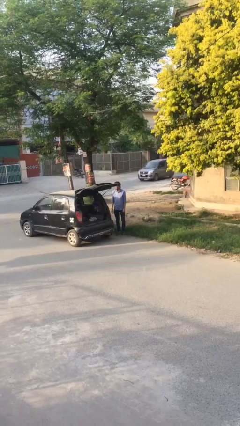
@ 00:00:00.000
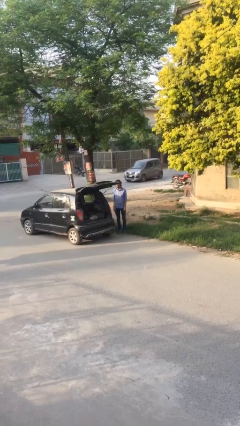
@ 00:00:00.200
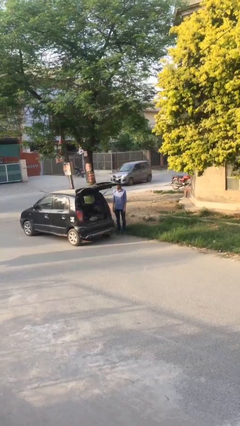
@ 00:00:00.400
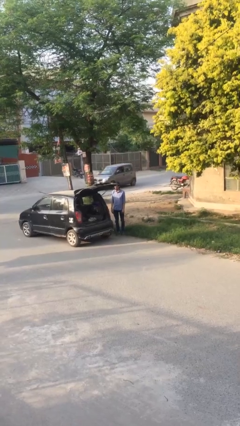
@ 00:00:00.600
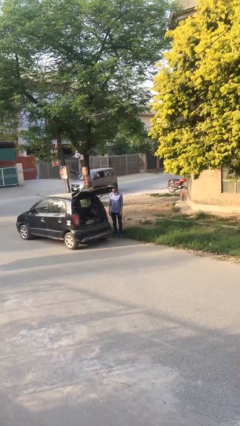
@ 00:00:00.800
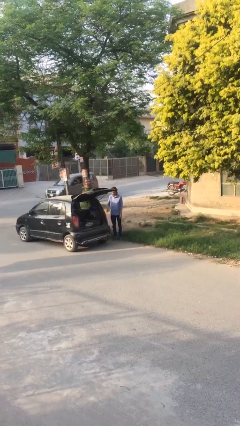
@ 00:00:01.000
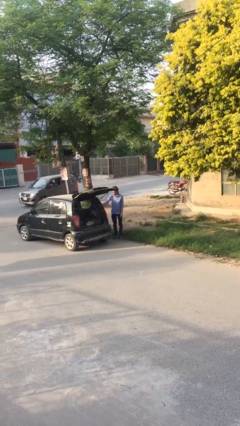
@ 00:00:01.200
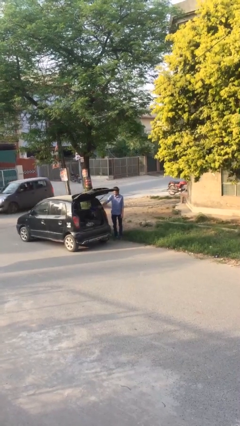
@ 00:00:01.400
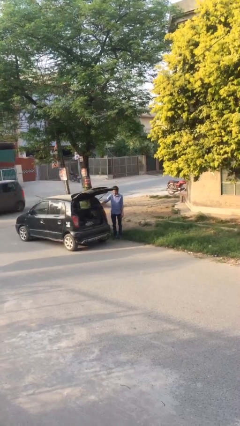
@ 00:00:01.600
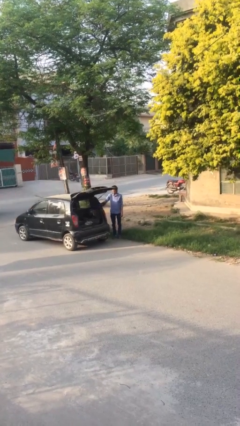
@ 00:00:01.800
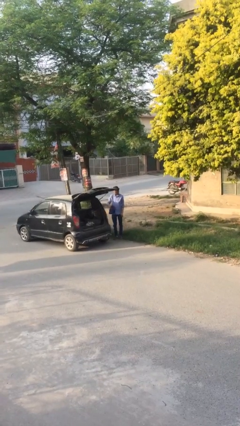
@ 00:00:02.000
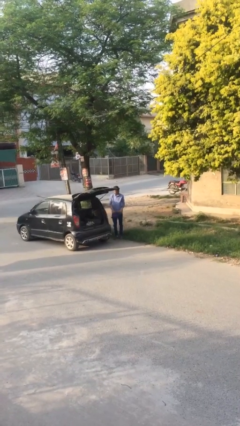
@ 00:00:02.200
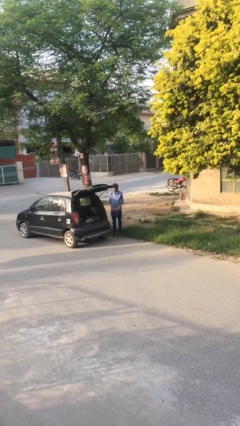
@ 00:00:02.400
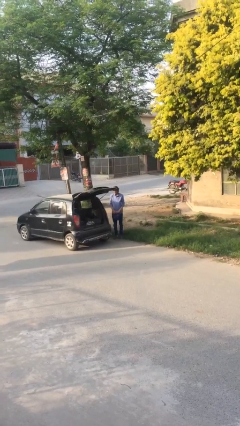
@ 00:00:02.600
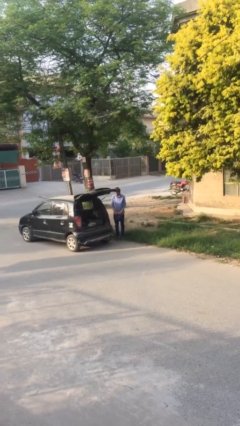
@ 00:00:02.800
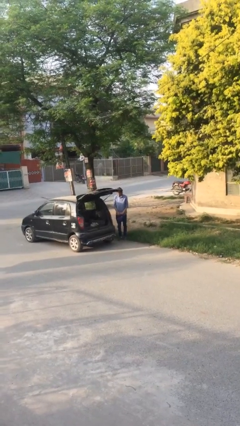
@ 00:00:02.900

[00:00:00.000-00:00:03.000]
person unloads car

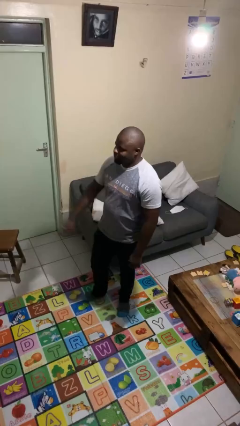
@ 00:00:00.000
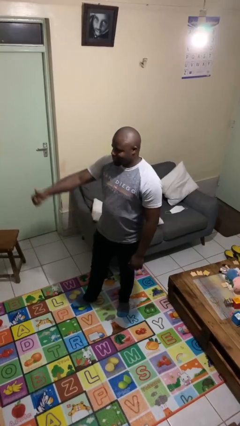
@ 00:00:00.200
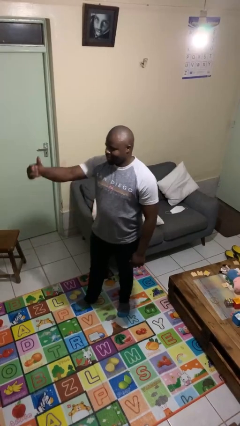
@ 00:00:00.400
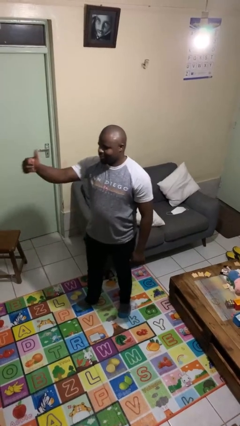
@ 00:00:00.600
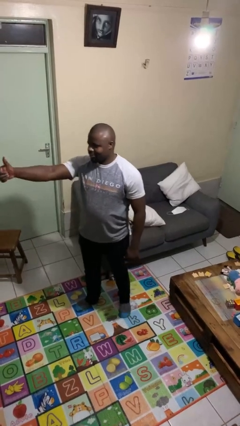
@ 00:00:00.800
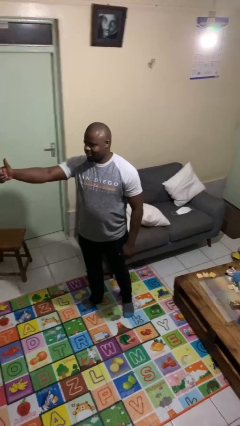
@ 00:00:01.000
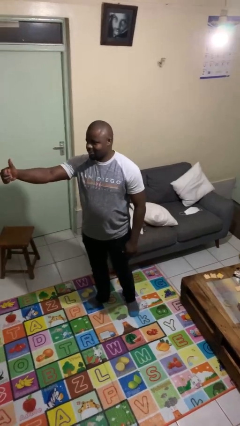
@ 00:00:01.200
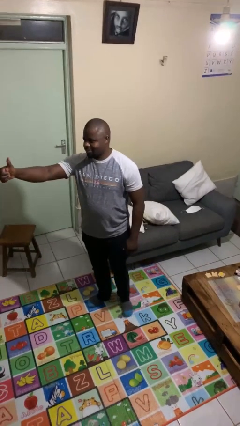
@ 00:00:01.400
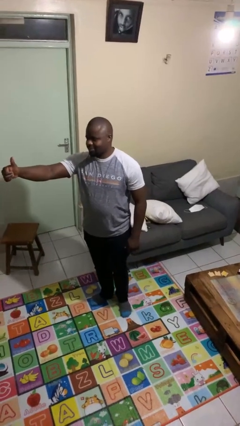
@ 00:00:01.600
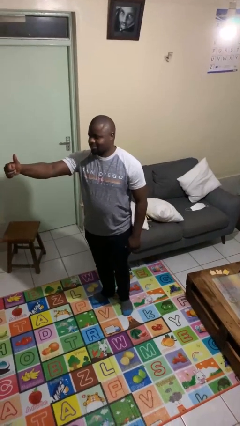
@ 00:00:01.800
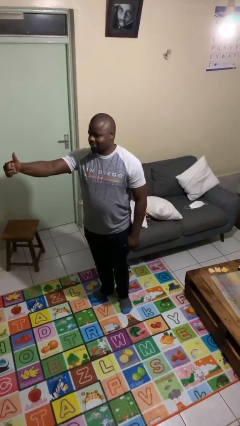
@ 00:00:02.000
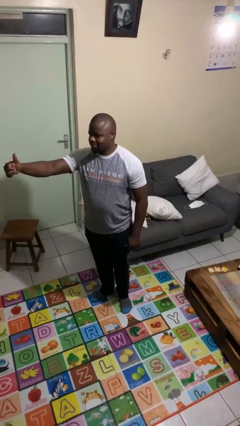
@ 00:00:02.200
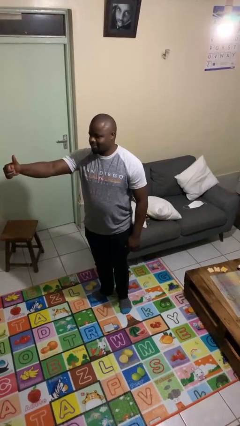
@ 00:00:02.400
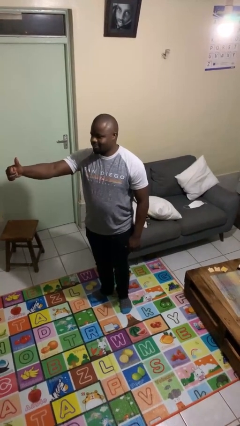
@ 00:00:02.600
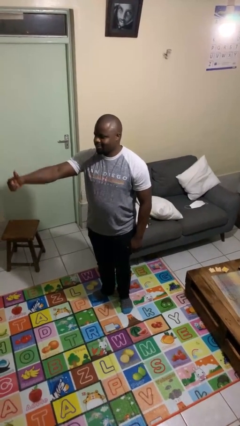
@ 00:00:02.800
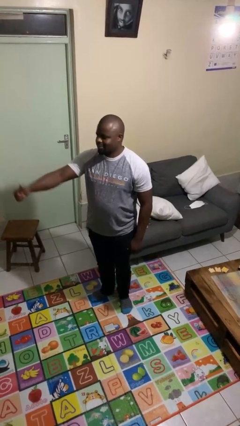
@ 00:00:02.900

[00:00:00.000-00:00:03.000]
person gestures thumbs up

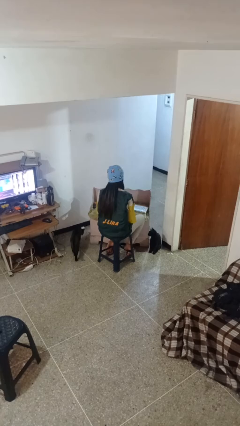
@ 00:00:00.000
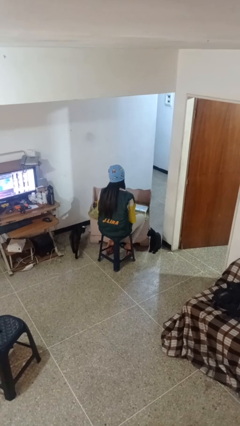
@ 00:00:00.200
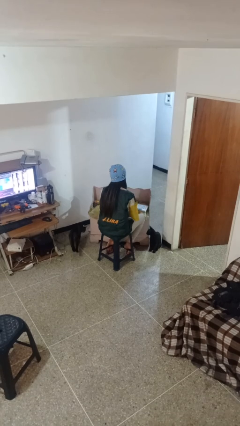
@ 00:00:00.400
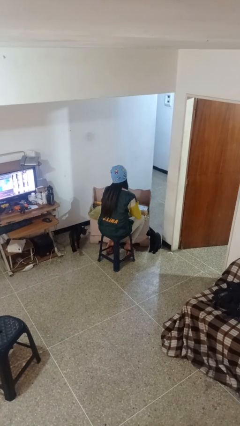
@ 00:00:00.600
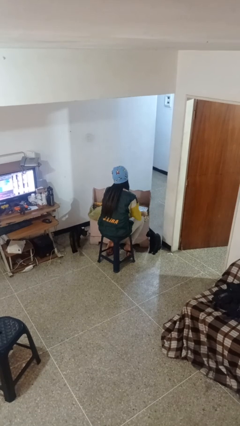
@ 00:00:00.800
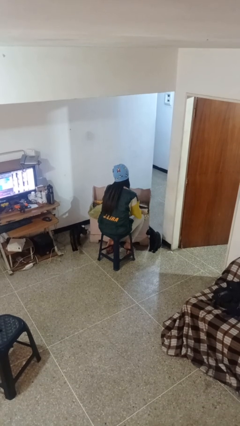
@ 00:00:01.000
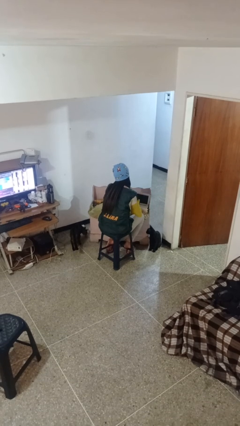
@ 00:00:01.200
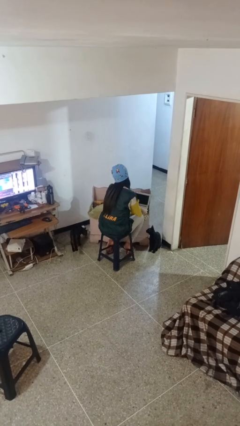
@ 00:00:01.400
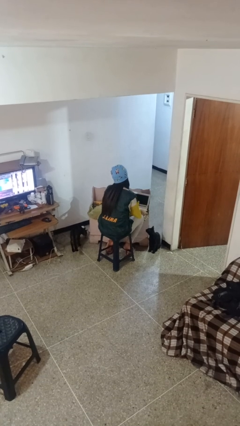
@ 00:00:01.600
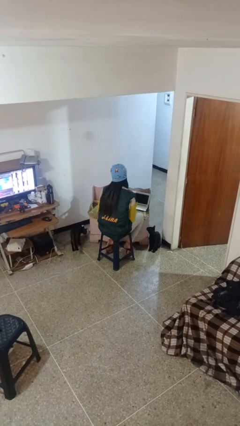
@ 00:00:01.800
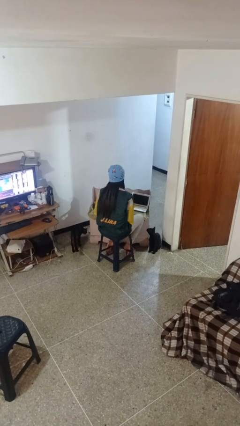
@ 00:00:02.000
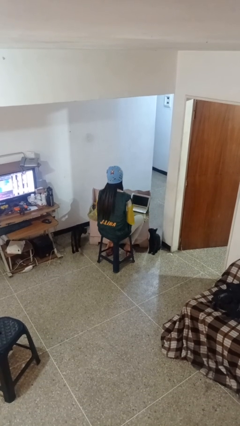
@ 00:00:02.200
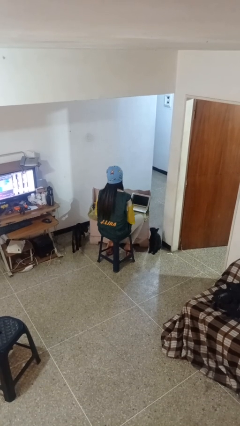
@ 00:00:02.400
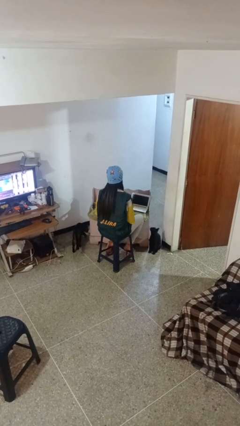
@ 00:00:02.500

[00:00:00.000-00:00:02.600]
person opens laptop

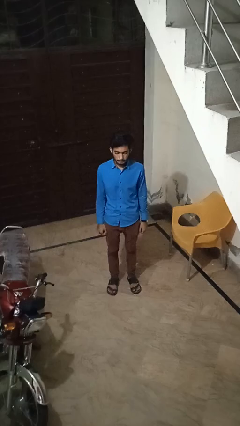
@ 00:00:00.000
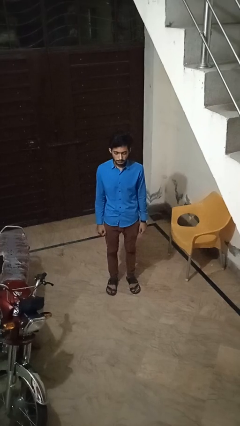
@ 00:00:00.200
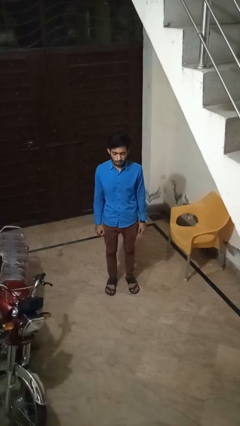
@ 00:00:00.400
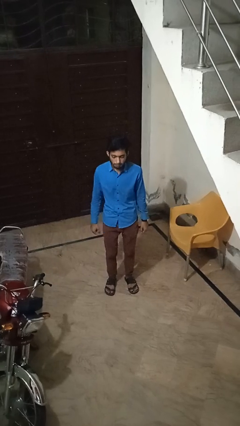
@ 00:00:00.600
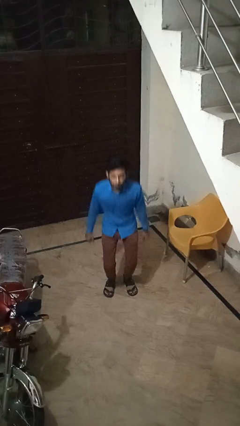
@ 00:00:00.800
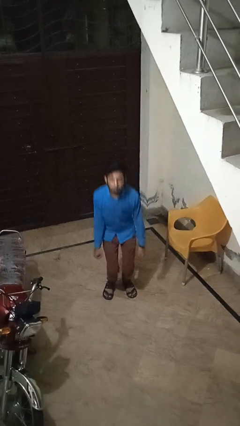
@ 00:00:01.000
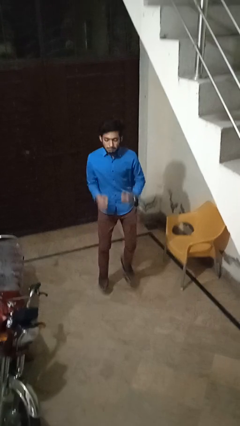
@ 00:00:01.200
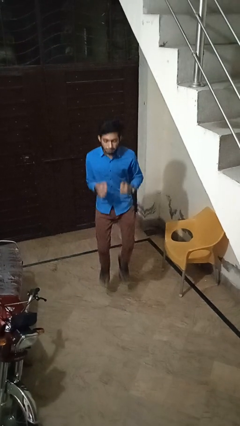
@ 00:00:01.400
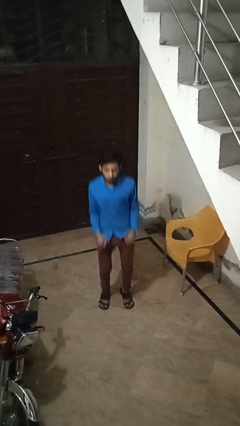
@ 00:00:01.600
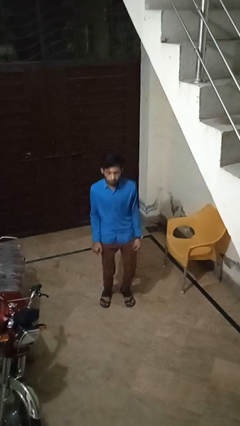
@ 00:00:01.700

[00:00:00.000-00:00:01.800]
person jumps

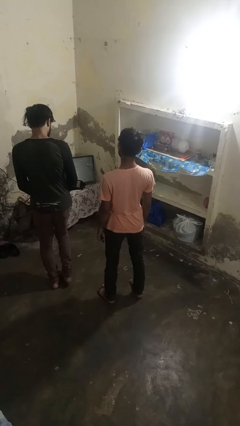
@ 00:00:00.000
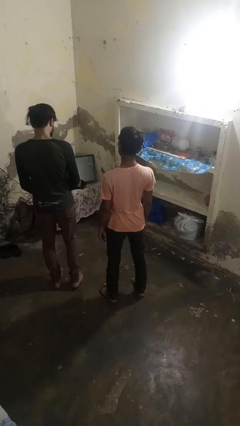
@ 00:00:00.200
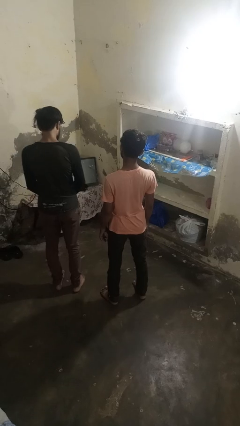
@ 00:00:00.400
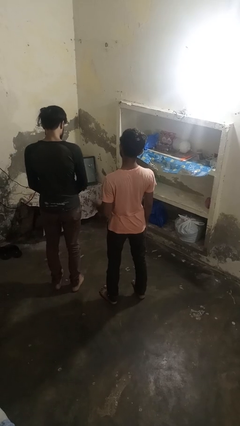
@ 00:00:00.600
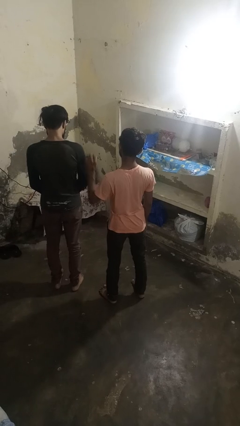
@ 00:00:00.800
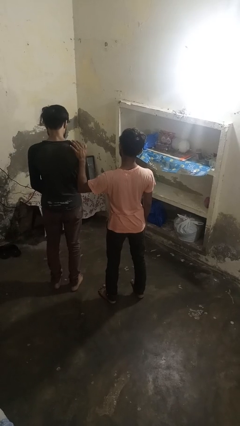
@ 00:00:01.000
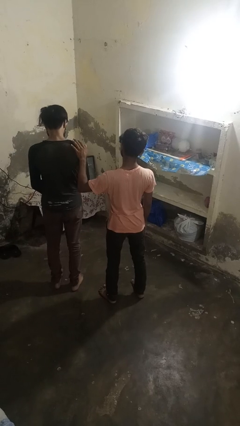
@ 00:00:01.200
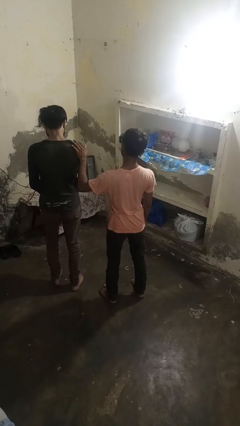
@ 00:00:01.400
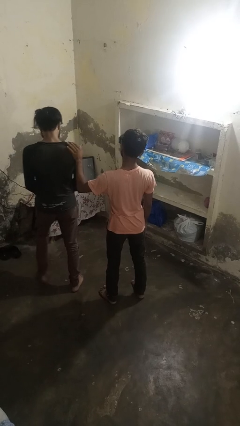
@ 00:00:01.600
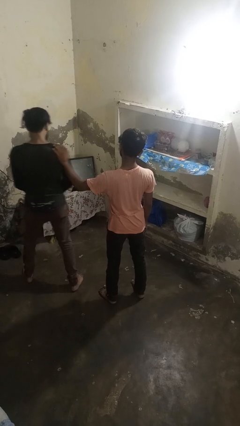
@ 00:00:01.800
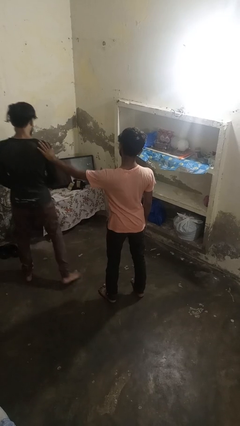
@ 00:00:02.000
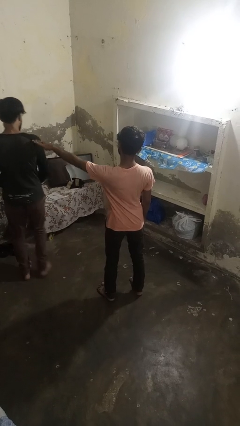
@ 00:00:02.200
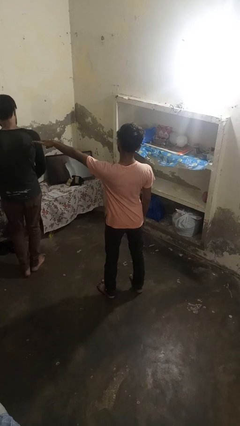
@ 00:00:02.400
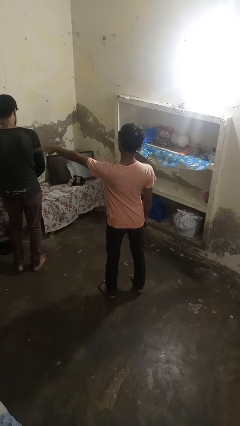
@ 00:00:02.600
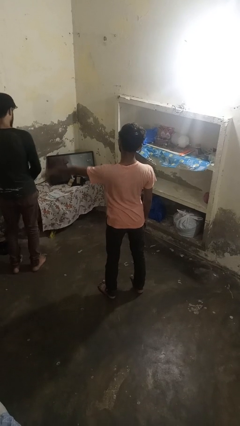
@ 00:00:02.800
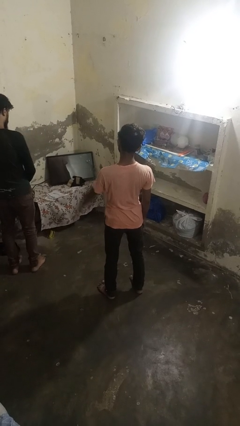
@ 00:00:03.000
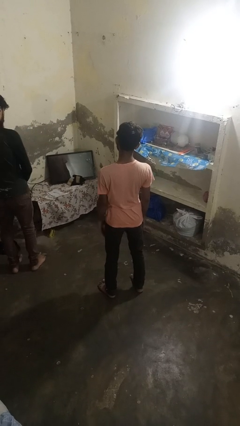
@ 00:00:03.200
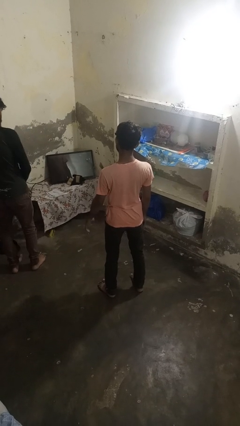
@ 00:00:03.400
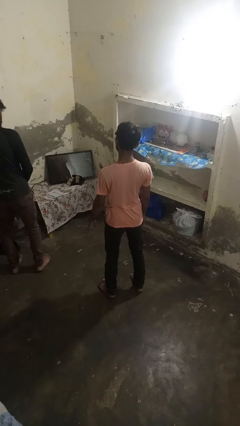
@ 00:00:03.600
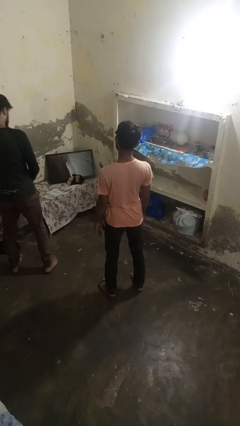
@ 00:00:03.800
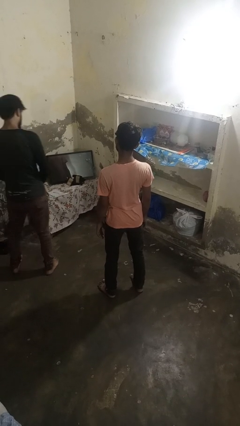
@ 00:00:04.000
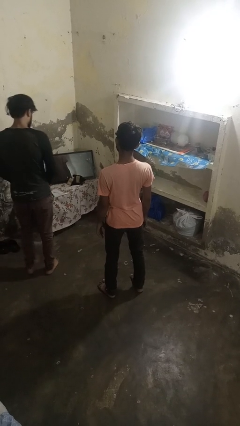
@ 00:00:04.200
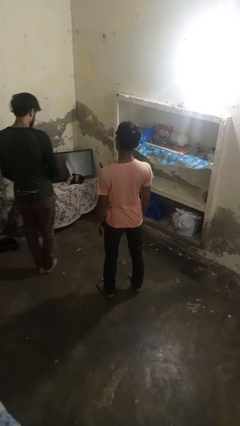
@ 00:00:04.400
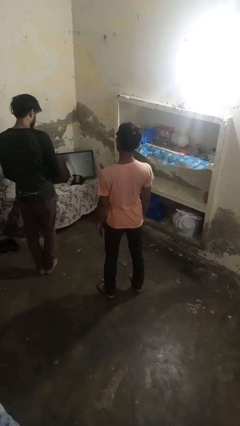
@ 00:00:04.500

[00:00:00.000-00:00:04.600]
person shoves person

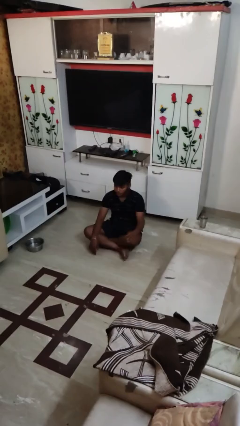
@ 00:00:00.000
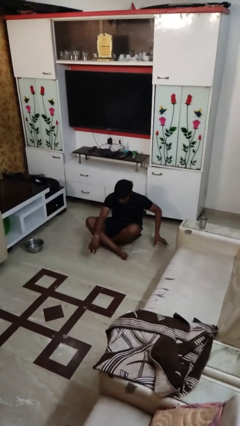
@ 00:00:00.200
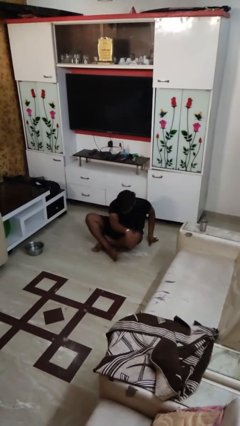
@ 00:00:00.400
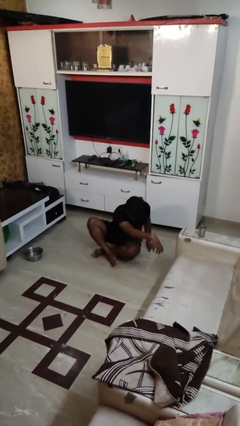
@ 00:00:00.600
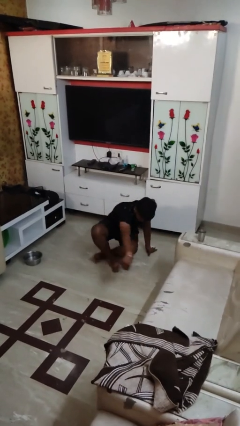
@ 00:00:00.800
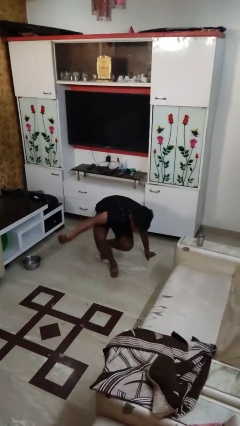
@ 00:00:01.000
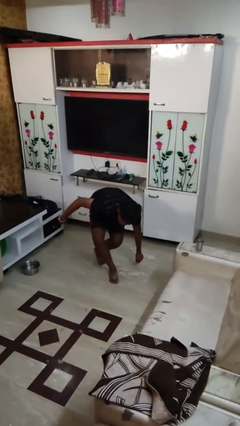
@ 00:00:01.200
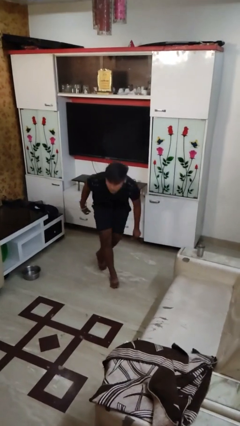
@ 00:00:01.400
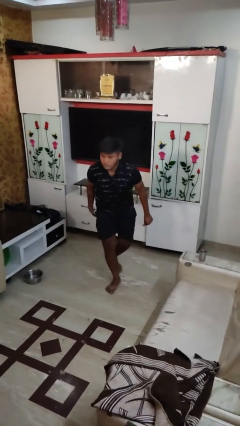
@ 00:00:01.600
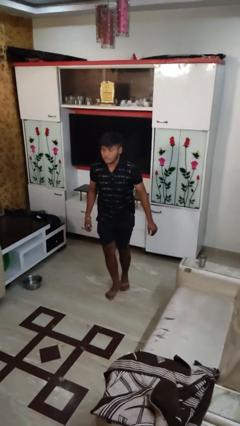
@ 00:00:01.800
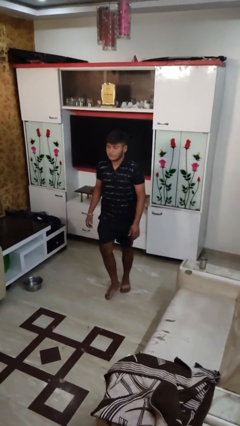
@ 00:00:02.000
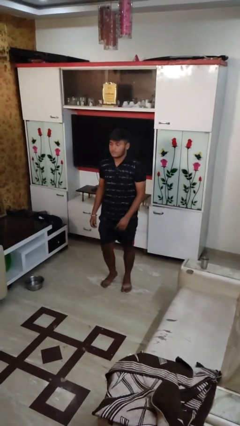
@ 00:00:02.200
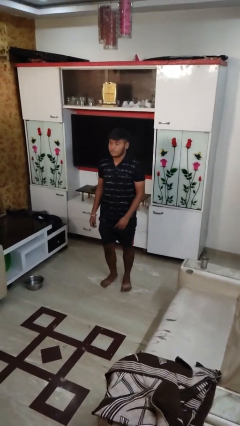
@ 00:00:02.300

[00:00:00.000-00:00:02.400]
person stands up from floor
